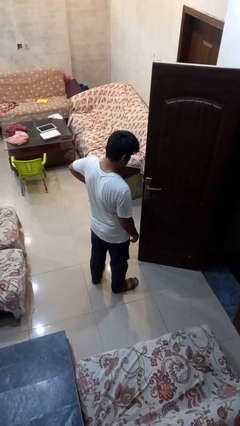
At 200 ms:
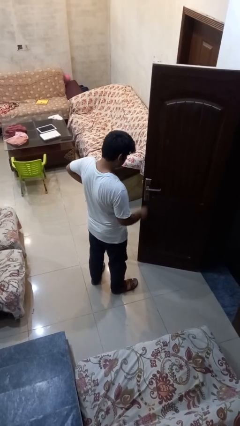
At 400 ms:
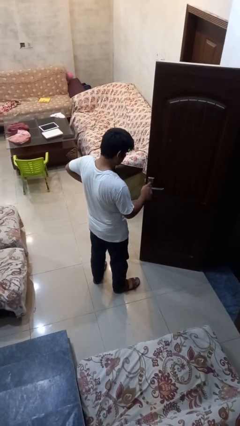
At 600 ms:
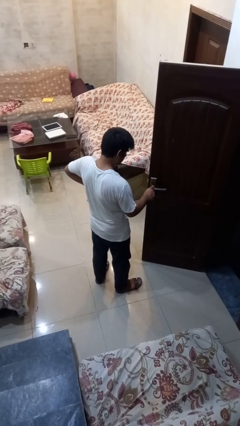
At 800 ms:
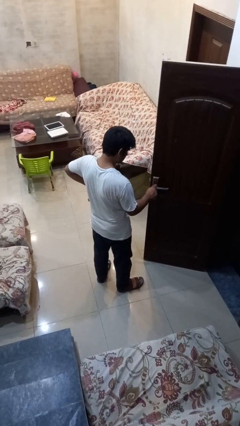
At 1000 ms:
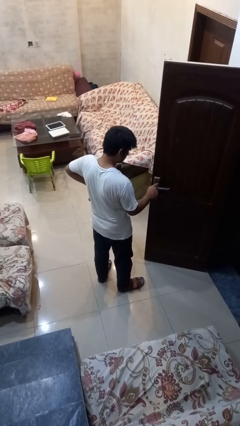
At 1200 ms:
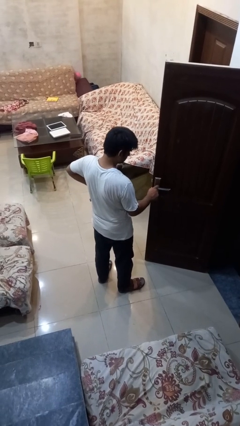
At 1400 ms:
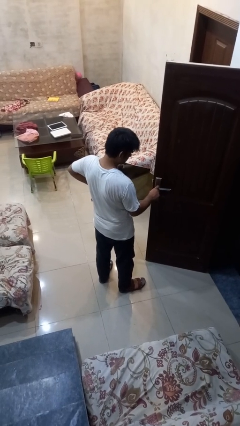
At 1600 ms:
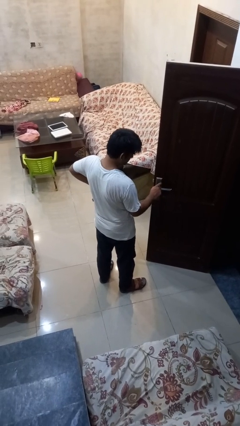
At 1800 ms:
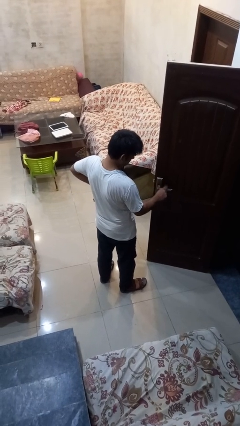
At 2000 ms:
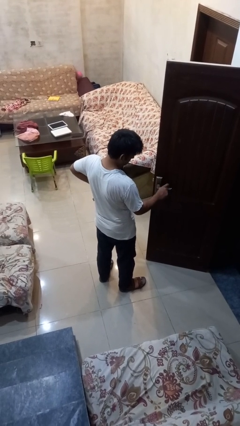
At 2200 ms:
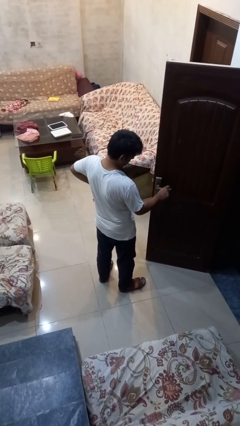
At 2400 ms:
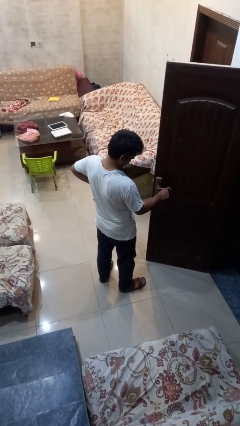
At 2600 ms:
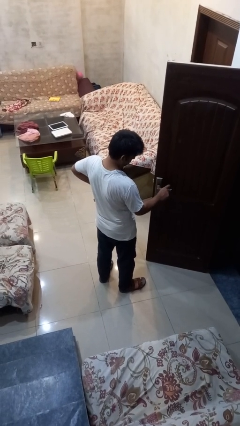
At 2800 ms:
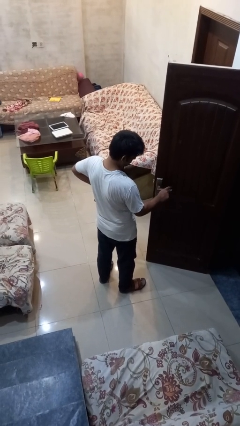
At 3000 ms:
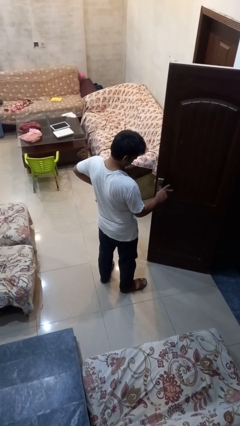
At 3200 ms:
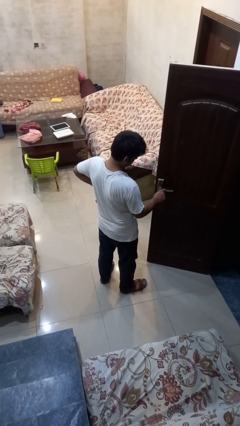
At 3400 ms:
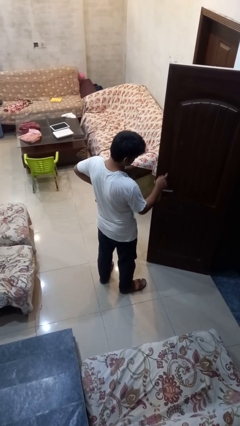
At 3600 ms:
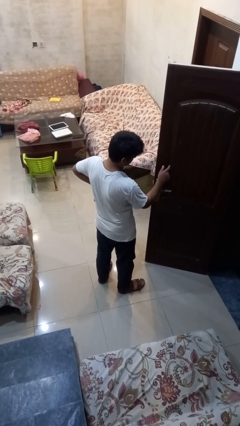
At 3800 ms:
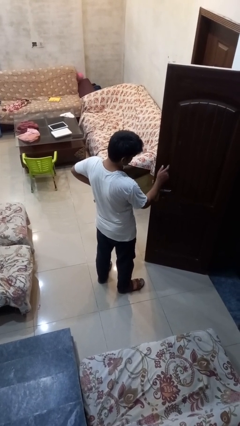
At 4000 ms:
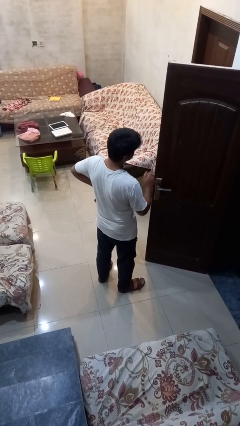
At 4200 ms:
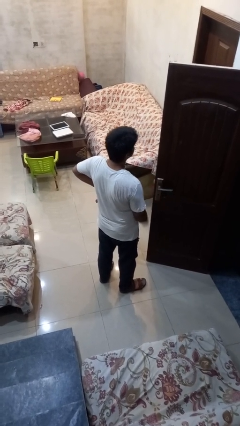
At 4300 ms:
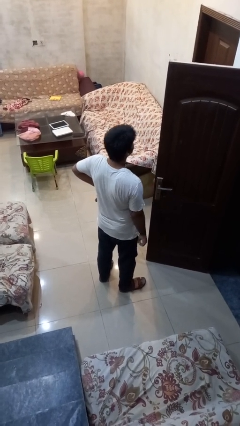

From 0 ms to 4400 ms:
person taps object with finger

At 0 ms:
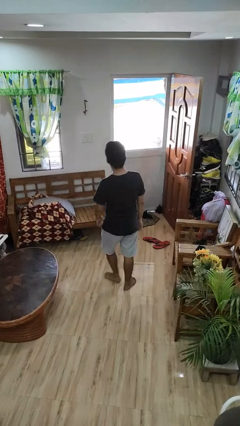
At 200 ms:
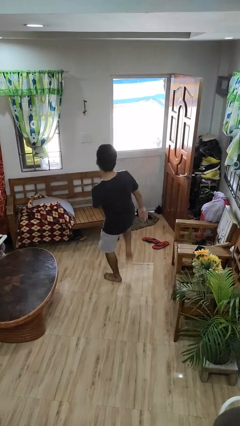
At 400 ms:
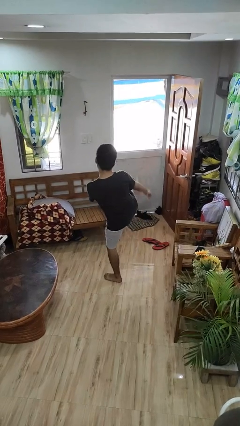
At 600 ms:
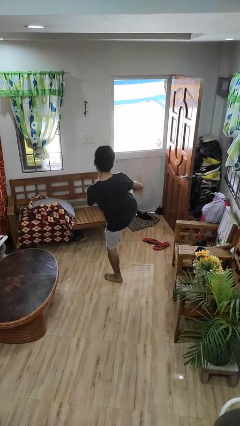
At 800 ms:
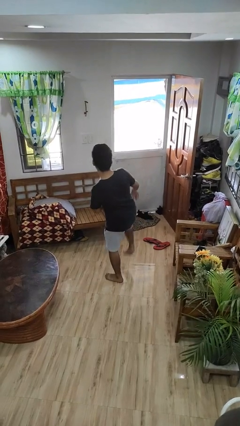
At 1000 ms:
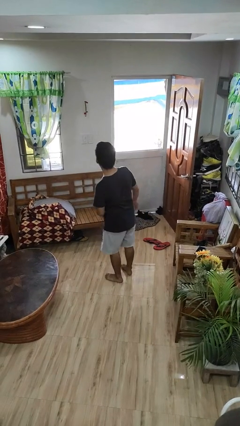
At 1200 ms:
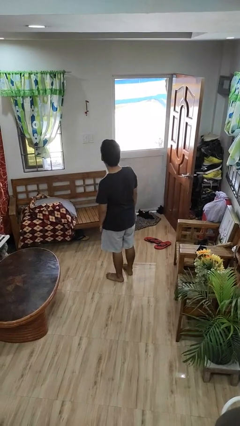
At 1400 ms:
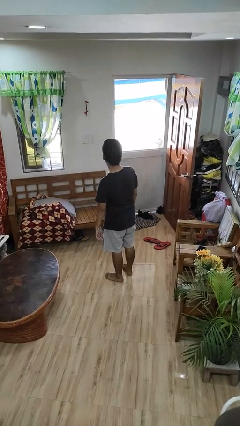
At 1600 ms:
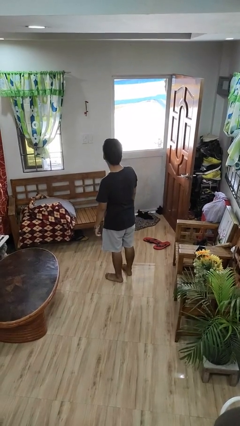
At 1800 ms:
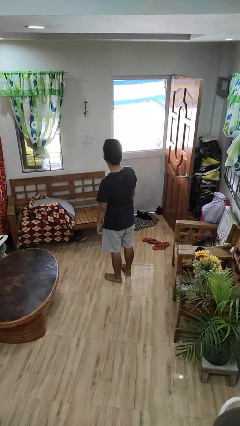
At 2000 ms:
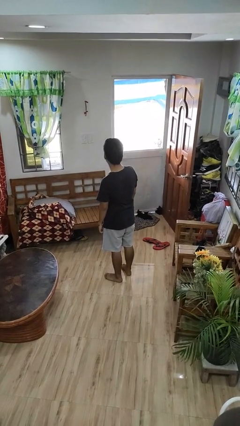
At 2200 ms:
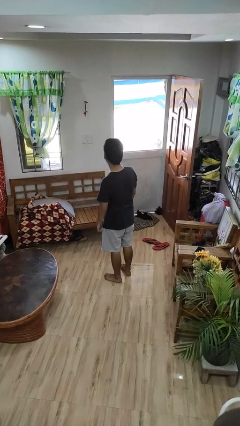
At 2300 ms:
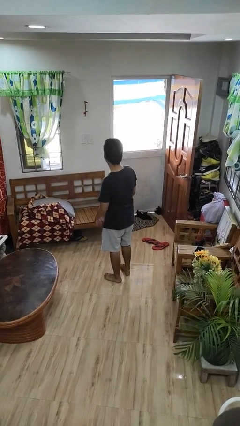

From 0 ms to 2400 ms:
person karate kicks

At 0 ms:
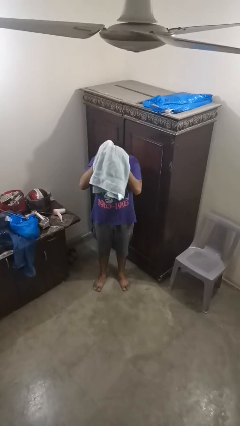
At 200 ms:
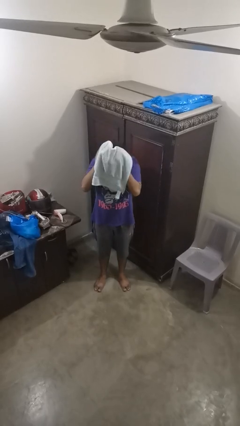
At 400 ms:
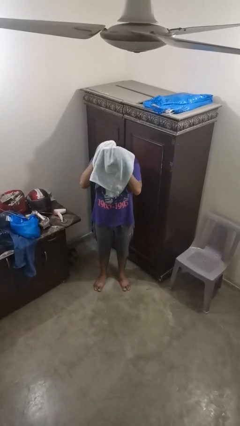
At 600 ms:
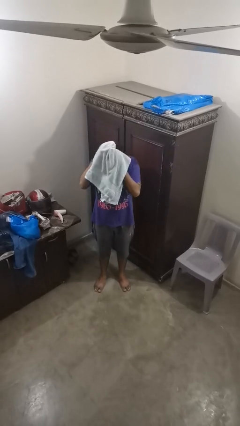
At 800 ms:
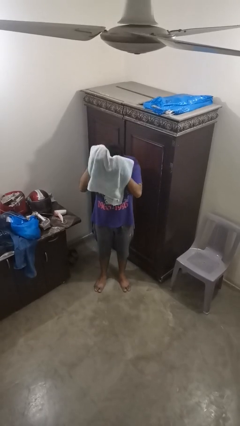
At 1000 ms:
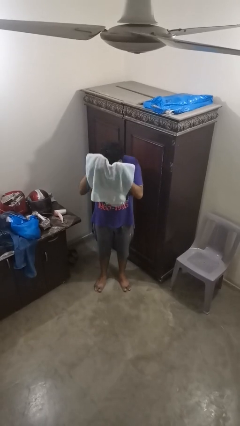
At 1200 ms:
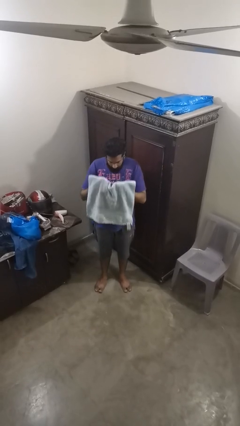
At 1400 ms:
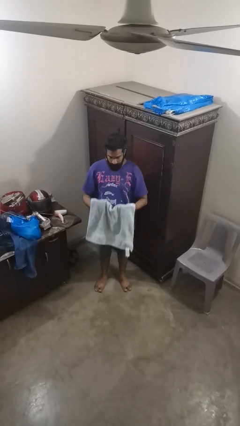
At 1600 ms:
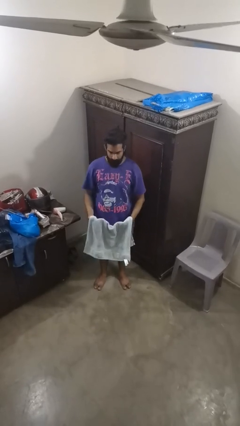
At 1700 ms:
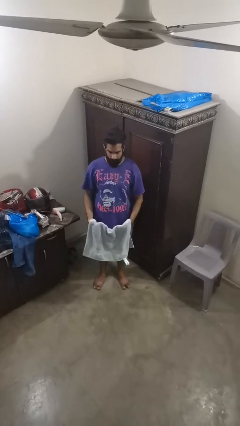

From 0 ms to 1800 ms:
person dries hair with towel

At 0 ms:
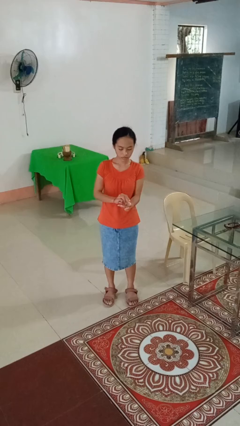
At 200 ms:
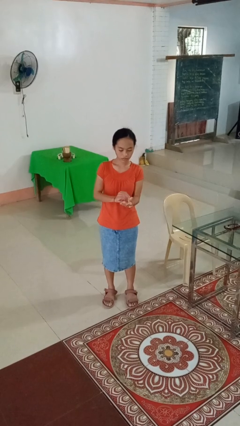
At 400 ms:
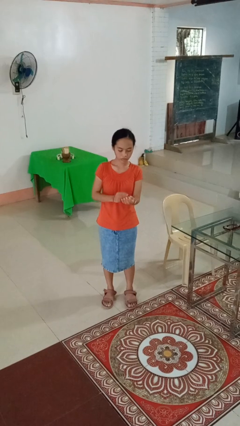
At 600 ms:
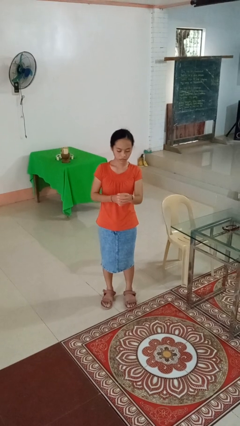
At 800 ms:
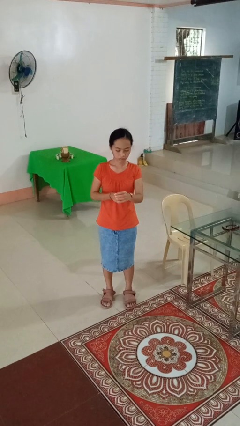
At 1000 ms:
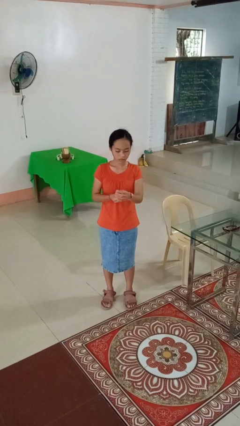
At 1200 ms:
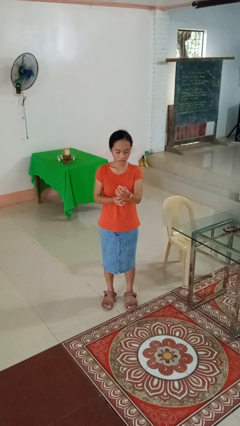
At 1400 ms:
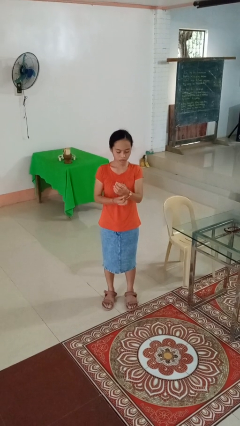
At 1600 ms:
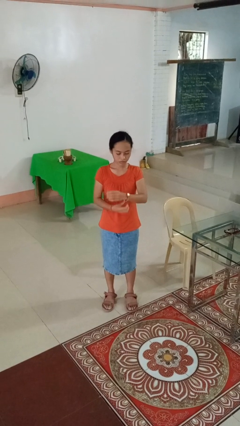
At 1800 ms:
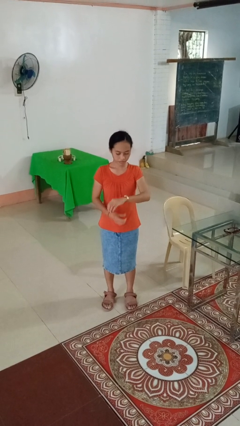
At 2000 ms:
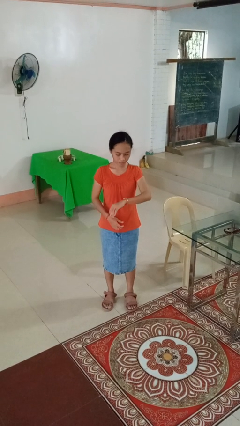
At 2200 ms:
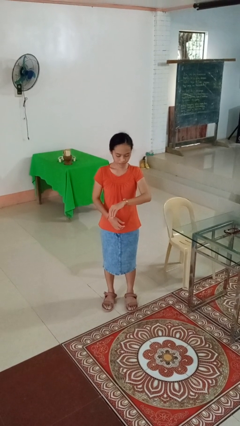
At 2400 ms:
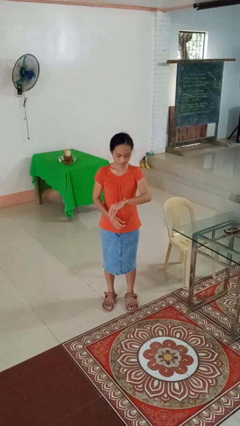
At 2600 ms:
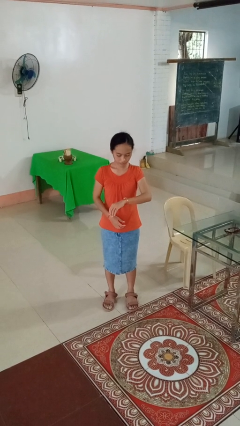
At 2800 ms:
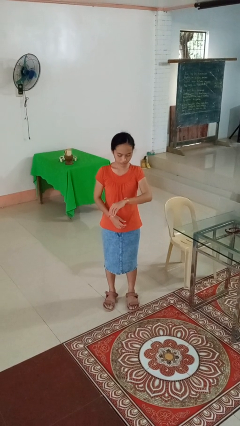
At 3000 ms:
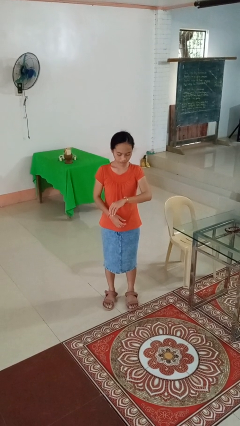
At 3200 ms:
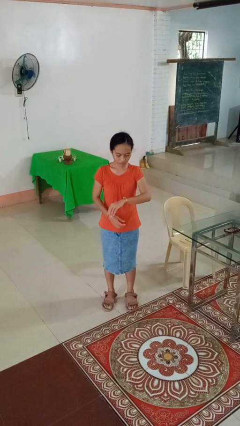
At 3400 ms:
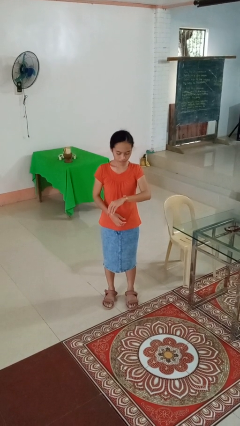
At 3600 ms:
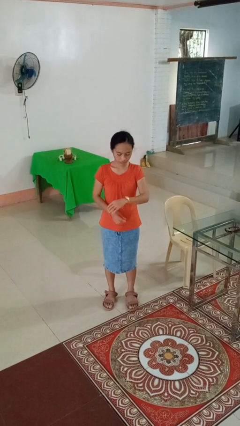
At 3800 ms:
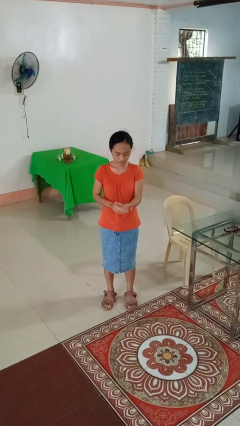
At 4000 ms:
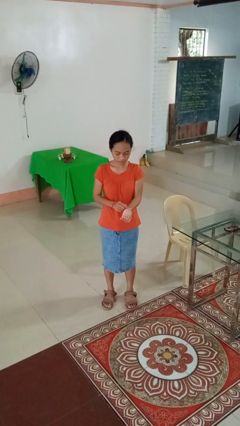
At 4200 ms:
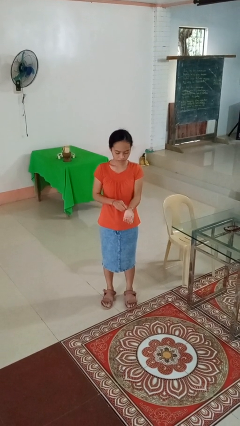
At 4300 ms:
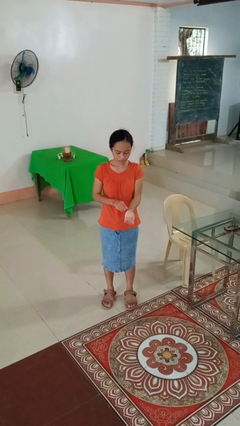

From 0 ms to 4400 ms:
person puts on wristwatch

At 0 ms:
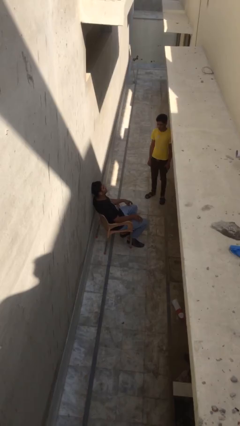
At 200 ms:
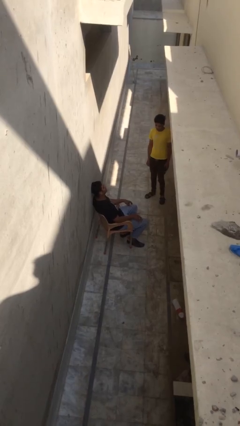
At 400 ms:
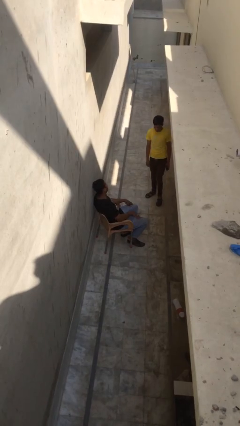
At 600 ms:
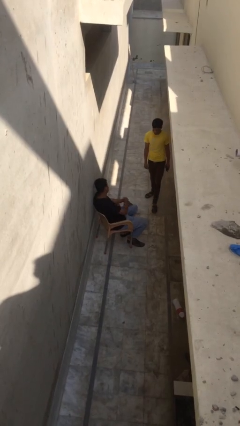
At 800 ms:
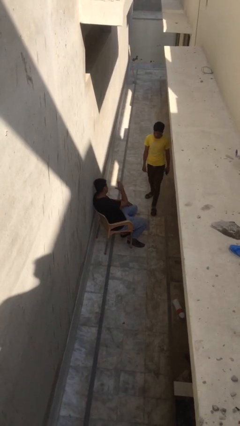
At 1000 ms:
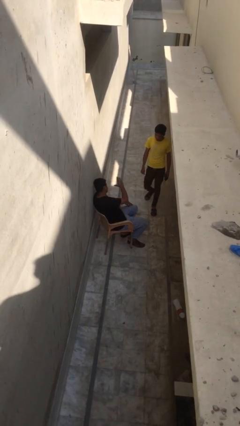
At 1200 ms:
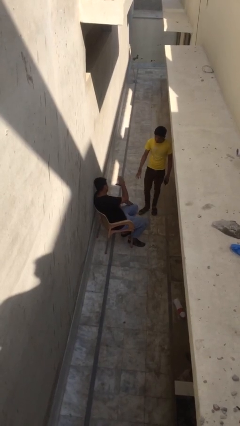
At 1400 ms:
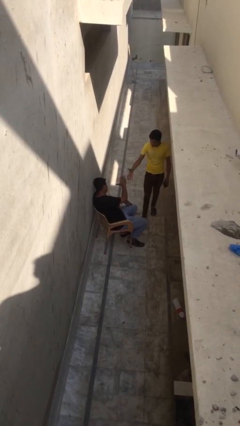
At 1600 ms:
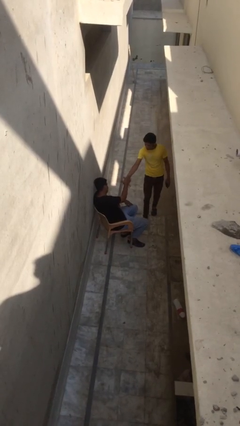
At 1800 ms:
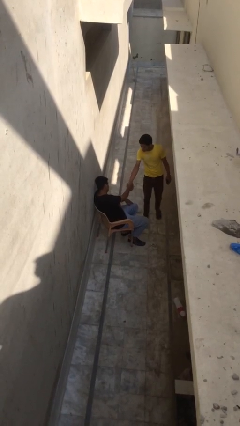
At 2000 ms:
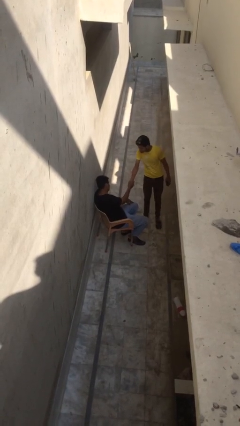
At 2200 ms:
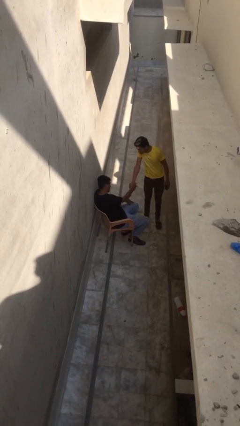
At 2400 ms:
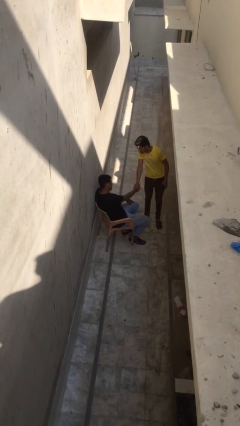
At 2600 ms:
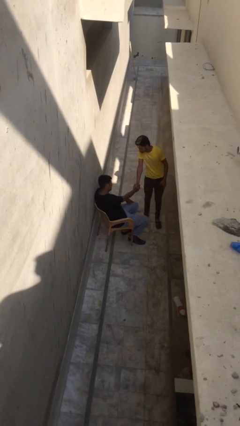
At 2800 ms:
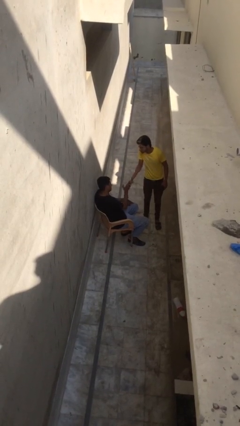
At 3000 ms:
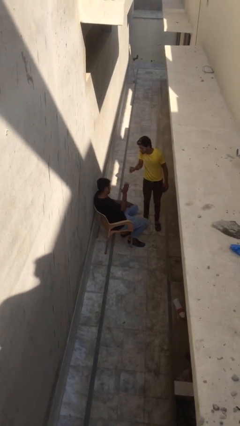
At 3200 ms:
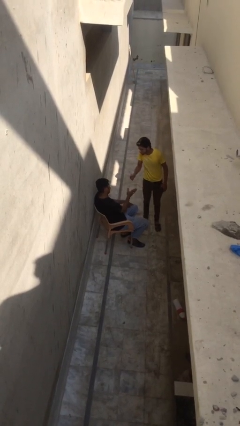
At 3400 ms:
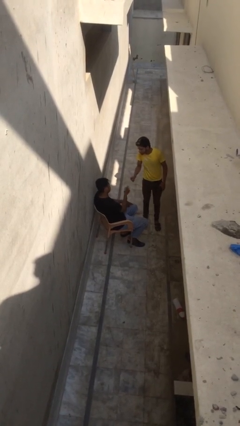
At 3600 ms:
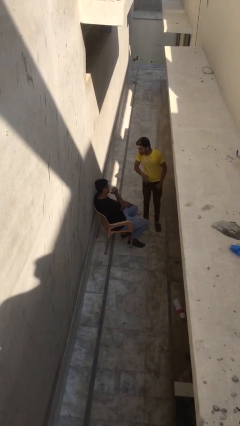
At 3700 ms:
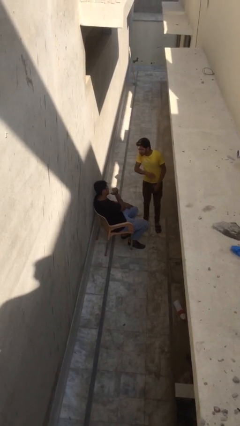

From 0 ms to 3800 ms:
person shakes hand

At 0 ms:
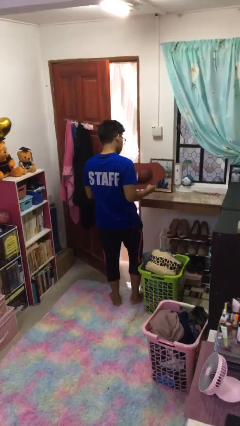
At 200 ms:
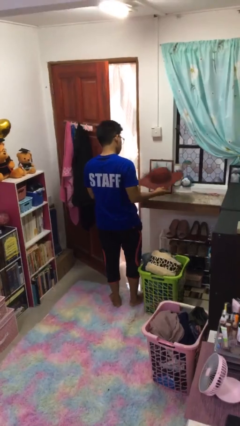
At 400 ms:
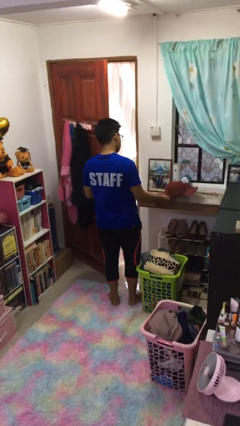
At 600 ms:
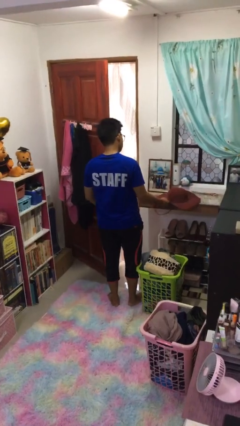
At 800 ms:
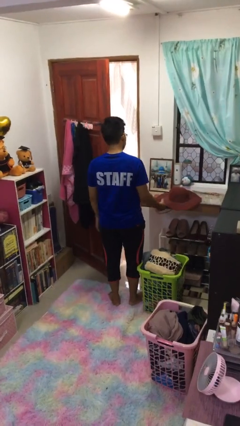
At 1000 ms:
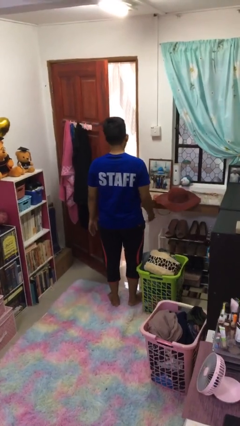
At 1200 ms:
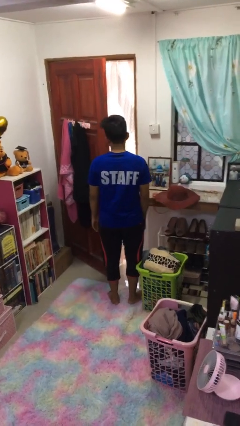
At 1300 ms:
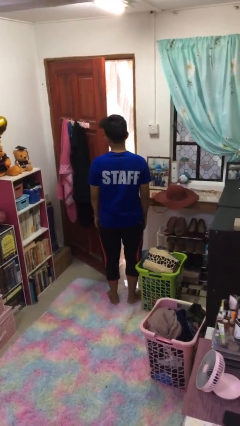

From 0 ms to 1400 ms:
person puts down object on countertop
